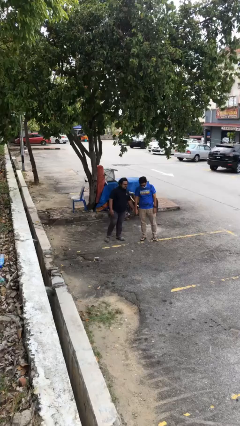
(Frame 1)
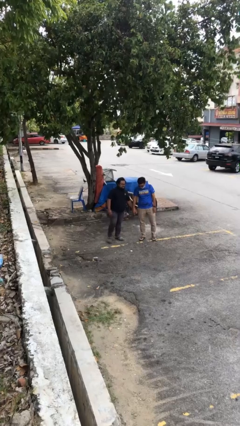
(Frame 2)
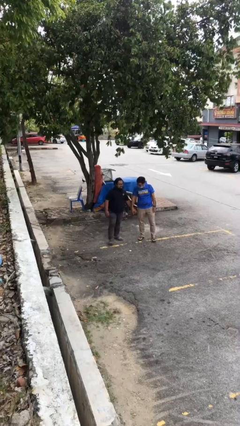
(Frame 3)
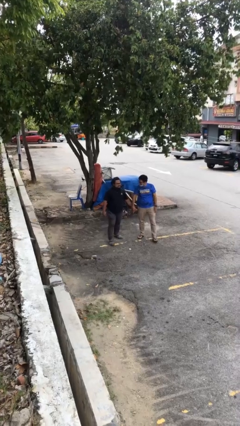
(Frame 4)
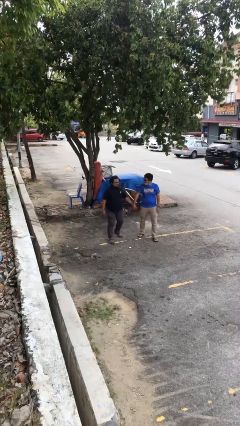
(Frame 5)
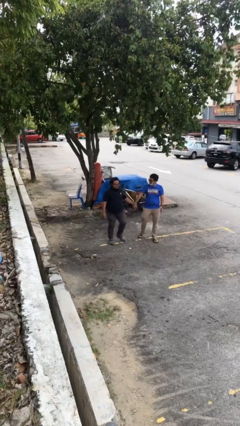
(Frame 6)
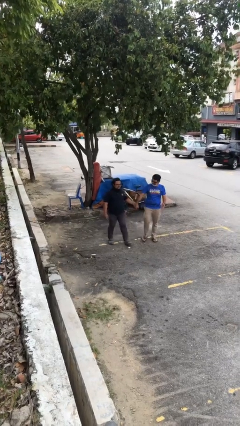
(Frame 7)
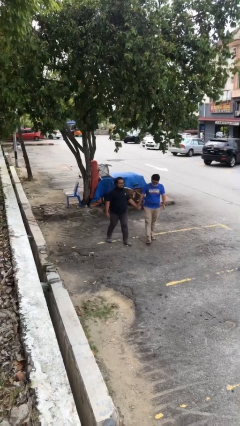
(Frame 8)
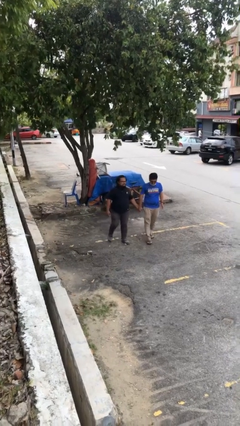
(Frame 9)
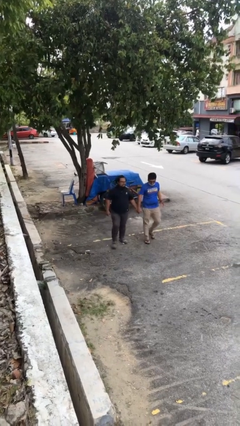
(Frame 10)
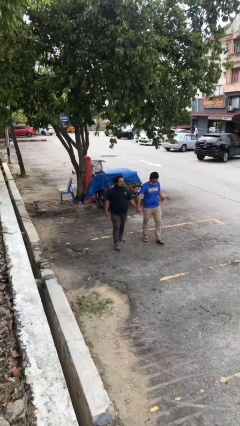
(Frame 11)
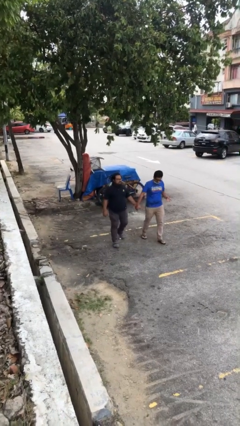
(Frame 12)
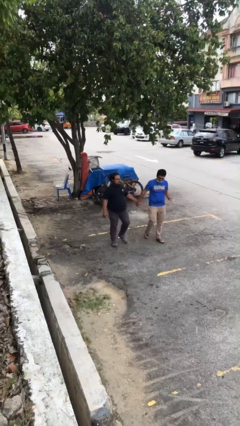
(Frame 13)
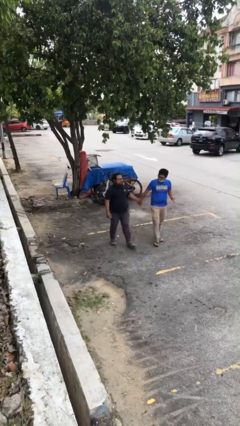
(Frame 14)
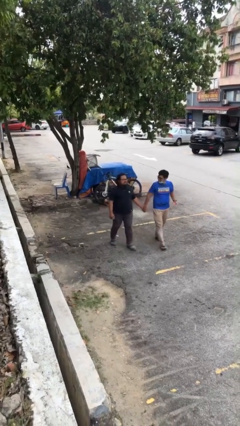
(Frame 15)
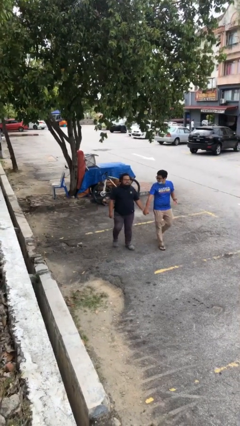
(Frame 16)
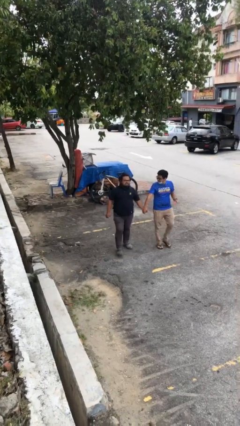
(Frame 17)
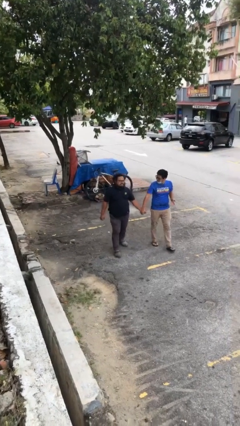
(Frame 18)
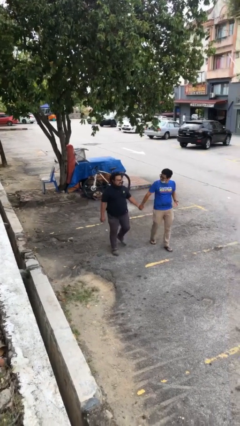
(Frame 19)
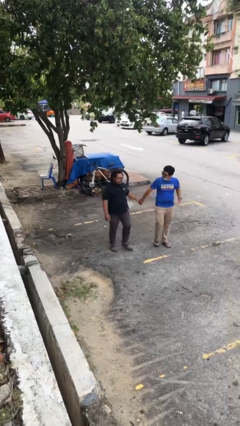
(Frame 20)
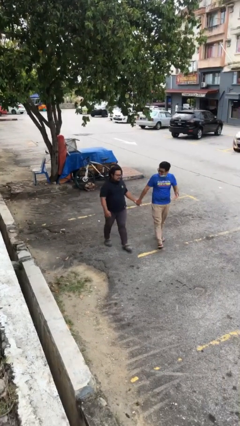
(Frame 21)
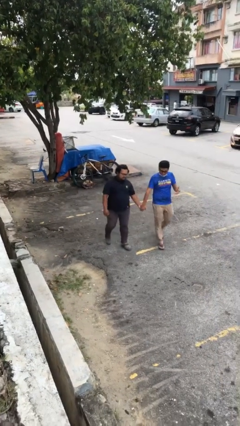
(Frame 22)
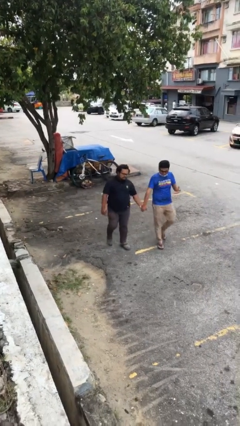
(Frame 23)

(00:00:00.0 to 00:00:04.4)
person holds hand

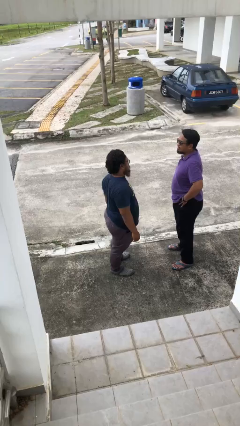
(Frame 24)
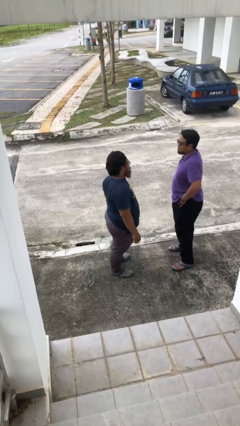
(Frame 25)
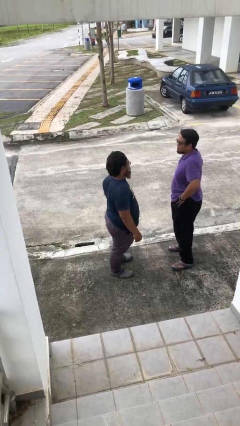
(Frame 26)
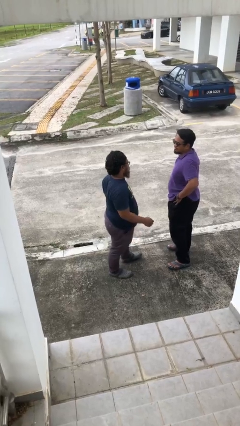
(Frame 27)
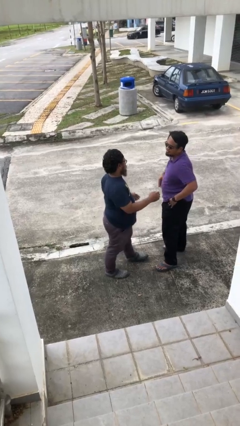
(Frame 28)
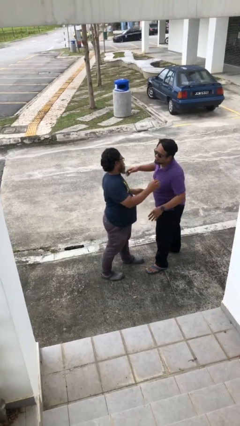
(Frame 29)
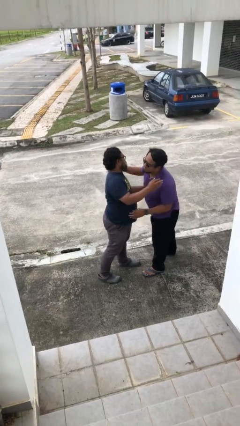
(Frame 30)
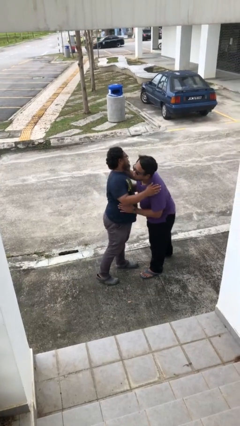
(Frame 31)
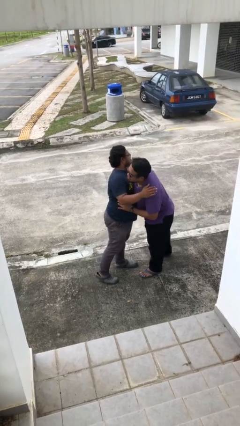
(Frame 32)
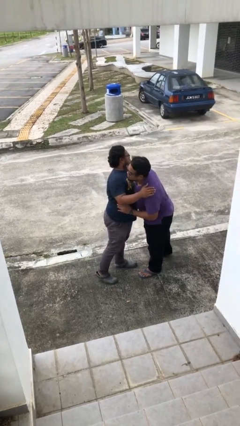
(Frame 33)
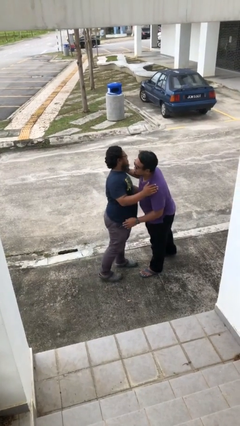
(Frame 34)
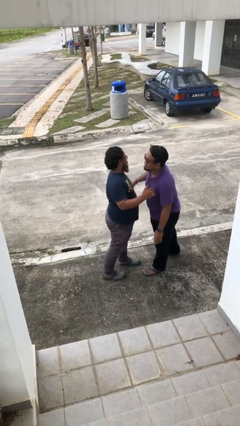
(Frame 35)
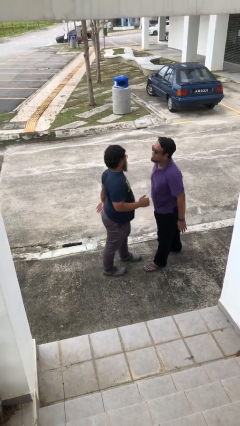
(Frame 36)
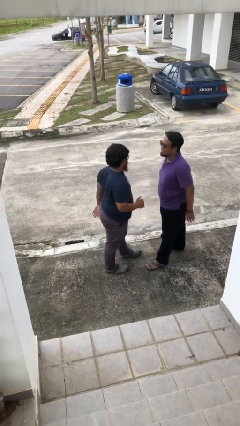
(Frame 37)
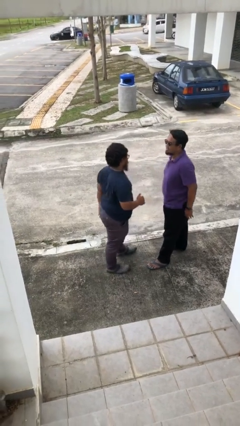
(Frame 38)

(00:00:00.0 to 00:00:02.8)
person embraces person

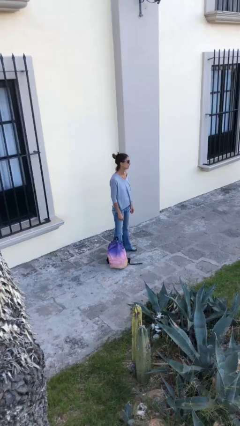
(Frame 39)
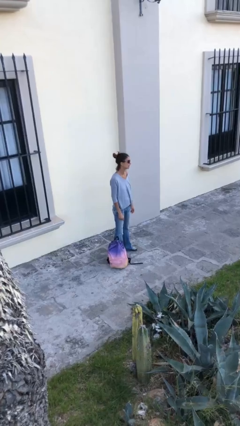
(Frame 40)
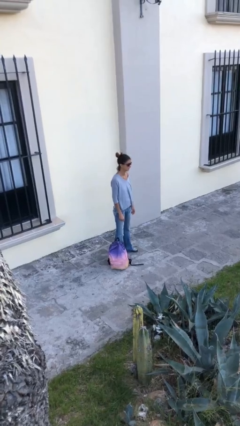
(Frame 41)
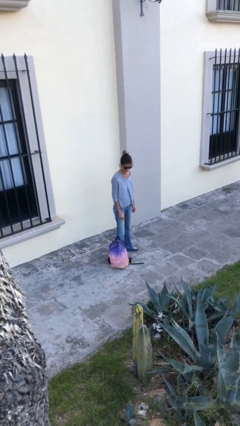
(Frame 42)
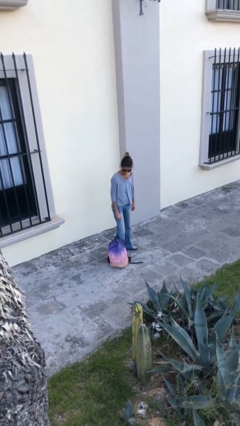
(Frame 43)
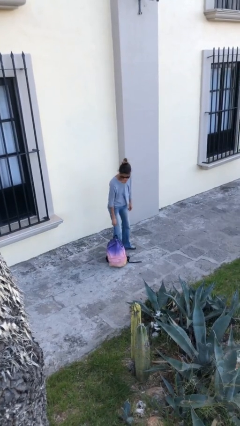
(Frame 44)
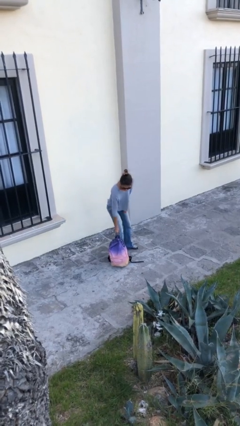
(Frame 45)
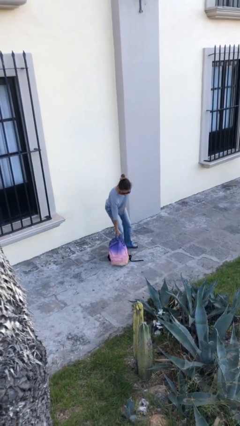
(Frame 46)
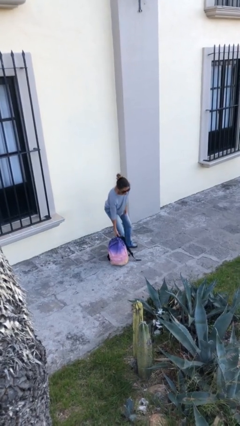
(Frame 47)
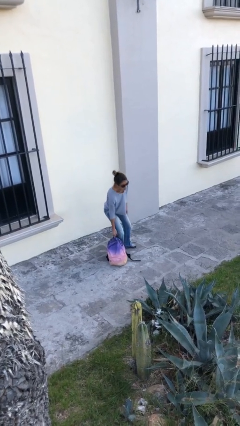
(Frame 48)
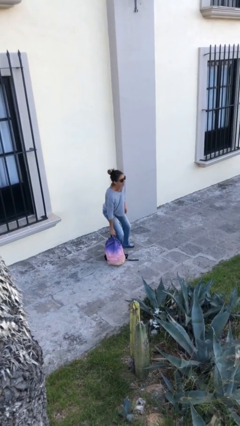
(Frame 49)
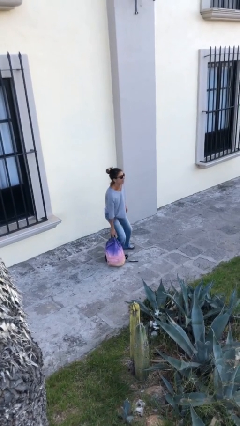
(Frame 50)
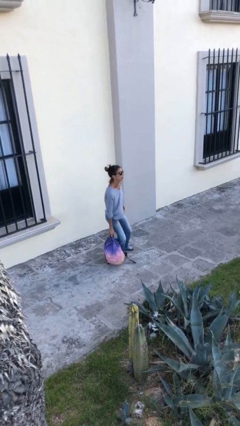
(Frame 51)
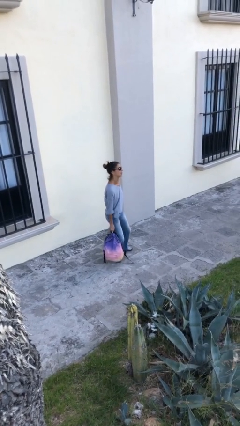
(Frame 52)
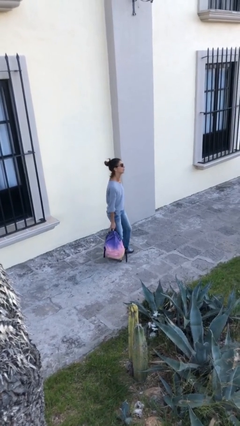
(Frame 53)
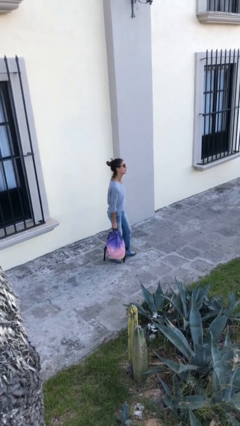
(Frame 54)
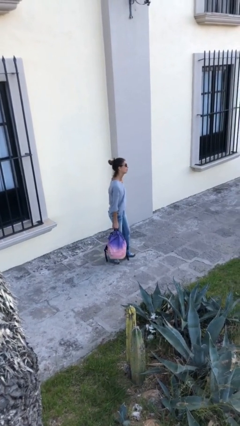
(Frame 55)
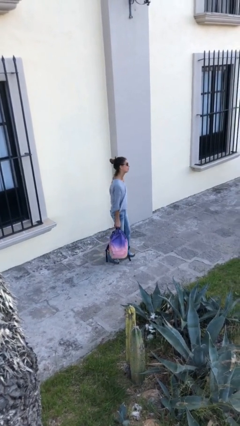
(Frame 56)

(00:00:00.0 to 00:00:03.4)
person picks up object from floor

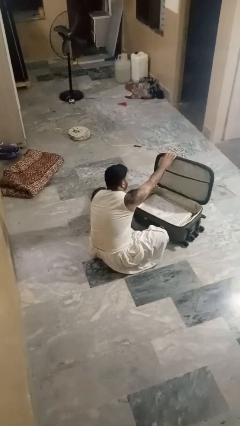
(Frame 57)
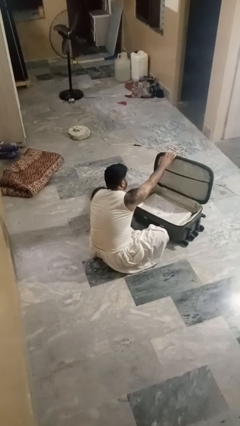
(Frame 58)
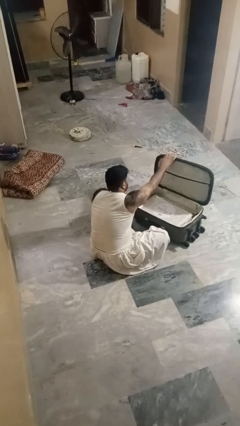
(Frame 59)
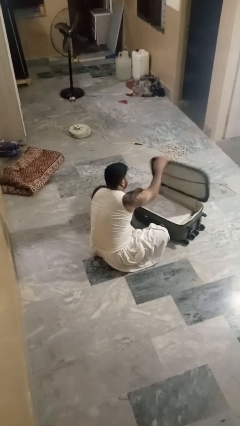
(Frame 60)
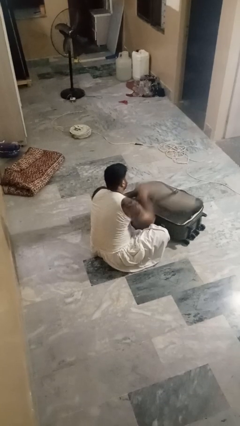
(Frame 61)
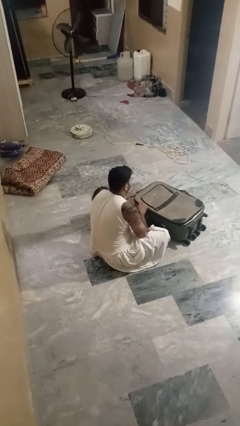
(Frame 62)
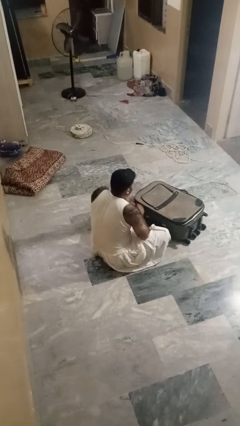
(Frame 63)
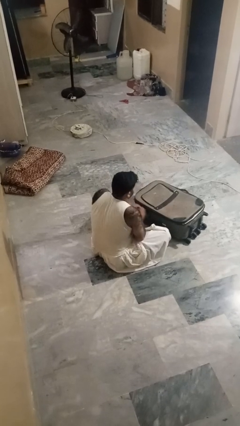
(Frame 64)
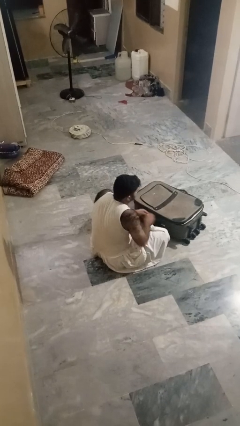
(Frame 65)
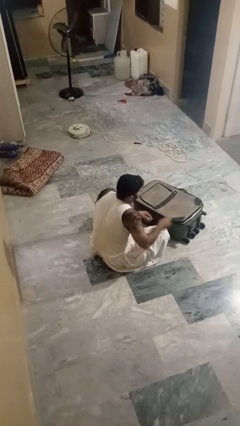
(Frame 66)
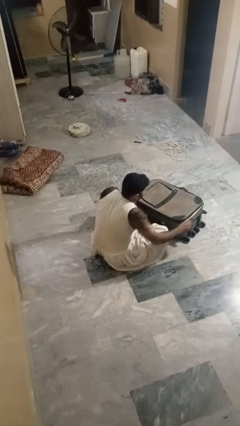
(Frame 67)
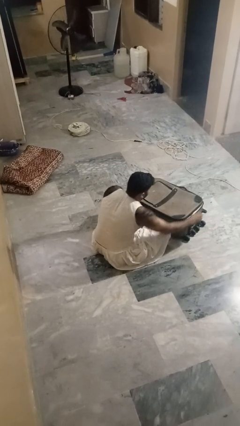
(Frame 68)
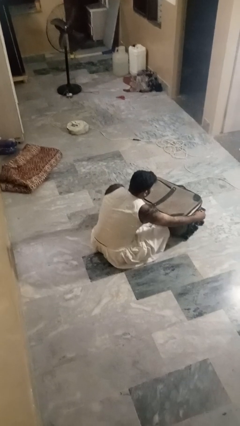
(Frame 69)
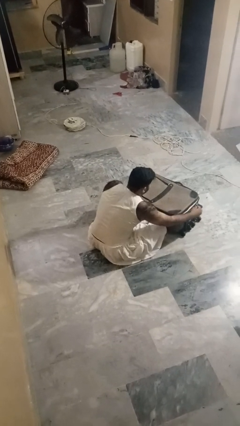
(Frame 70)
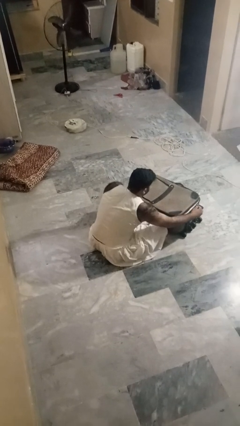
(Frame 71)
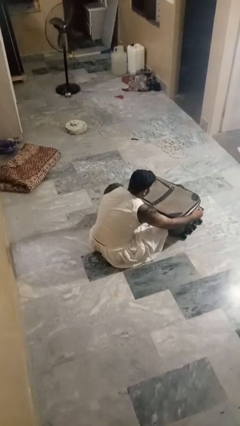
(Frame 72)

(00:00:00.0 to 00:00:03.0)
person closes suitcase

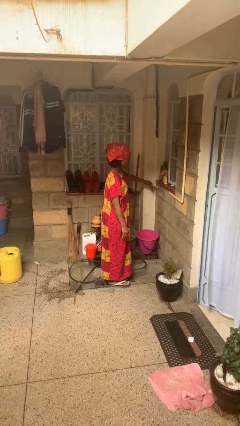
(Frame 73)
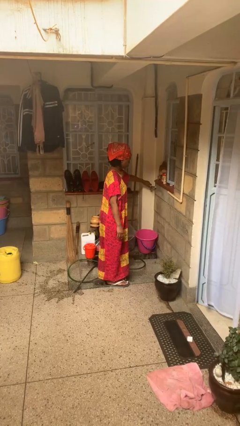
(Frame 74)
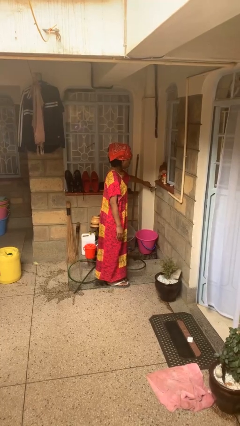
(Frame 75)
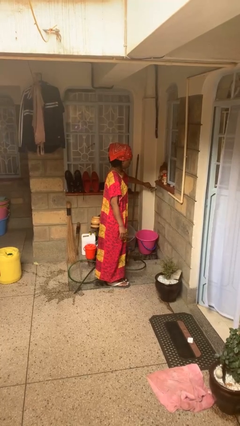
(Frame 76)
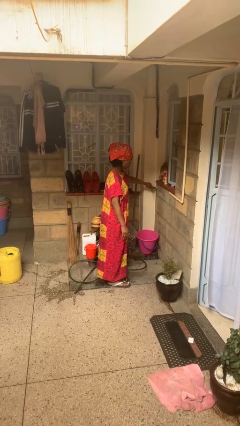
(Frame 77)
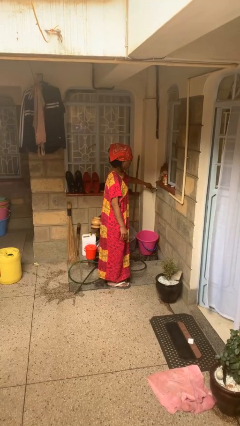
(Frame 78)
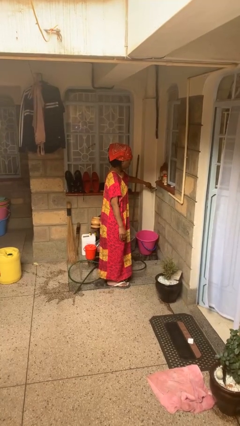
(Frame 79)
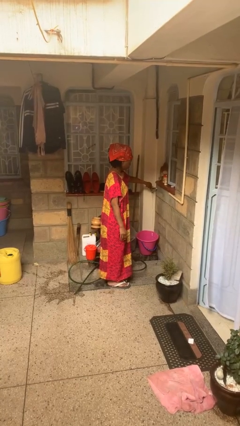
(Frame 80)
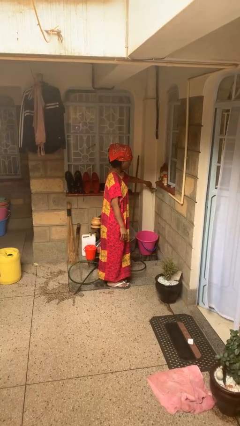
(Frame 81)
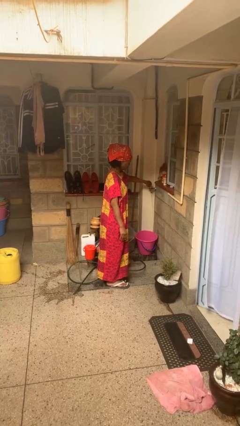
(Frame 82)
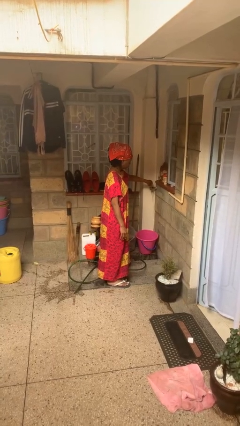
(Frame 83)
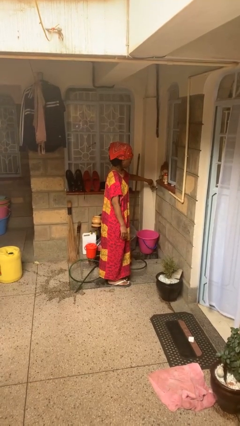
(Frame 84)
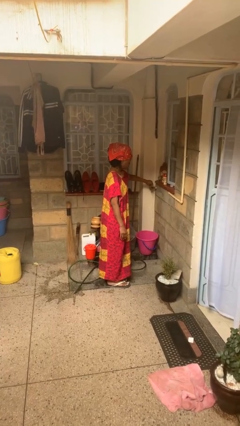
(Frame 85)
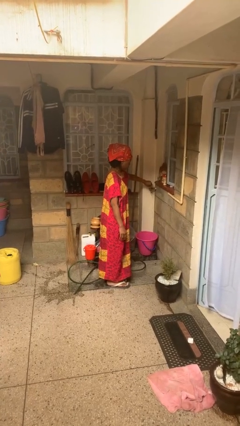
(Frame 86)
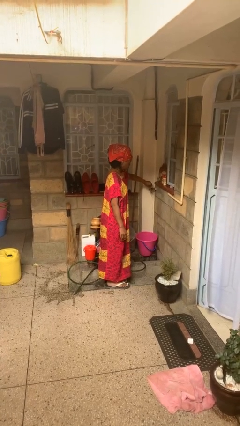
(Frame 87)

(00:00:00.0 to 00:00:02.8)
person turns on faucet

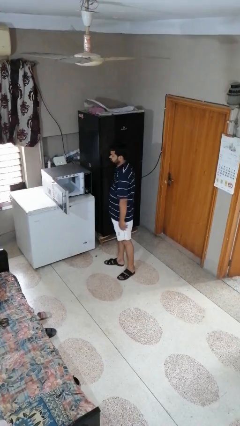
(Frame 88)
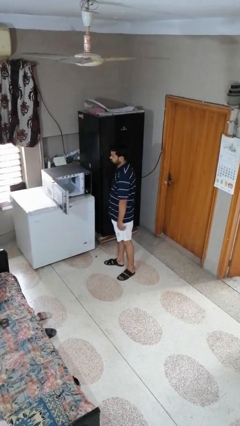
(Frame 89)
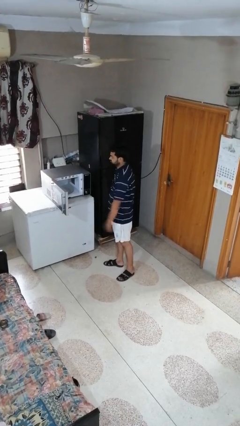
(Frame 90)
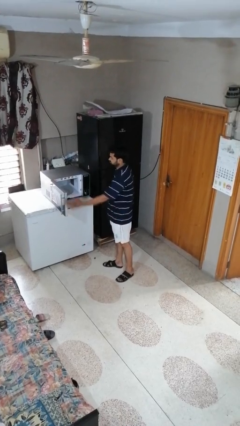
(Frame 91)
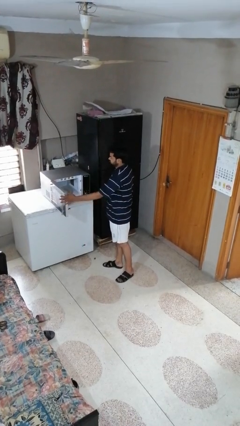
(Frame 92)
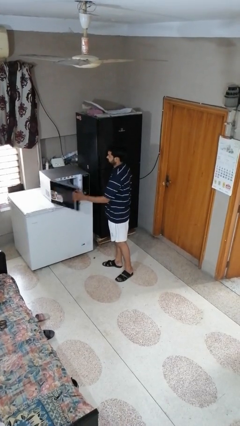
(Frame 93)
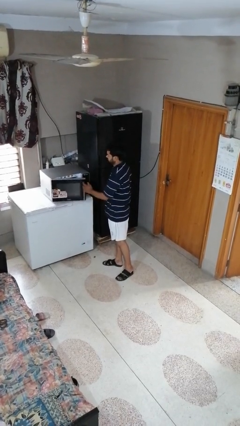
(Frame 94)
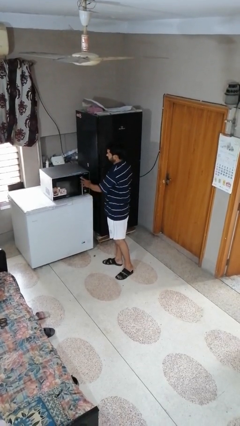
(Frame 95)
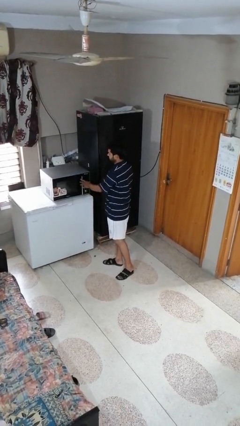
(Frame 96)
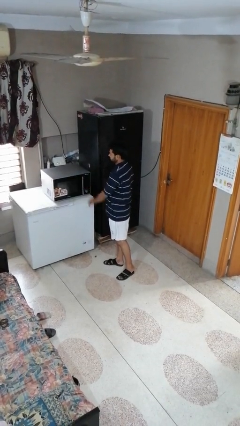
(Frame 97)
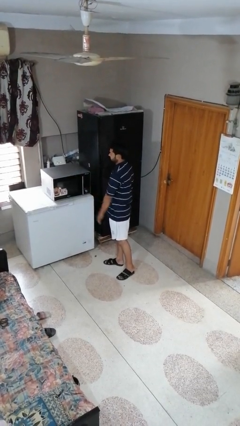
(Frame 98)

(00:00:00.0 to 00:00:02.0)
person closes microwave
